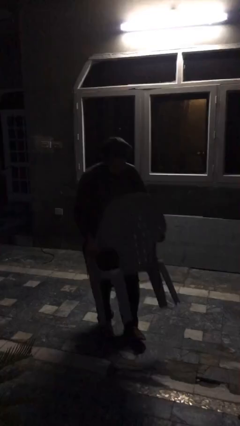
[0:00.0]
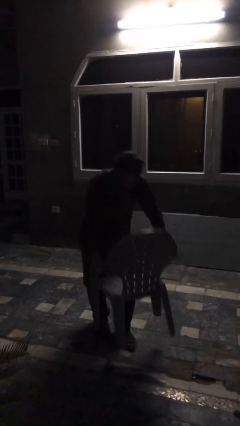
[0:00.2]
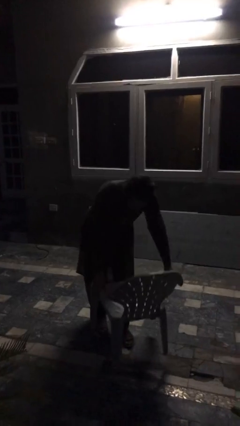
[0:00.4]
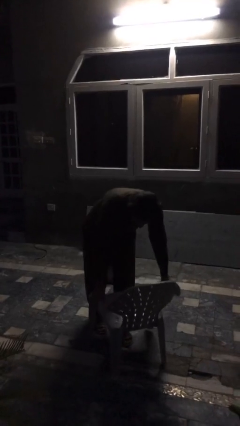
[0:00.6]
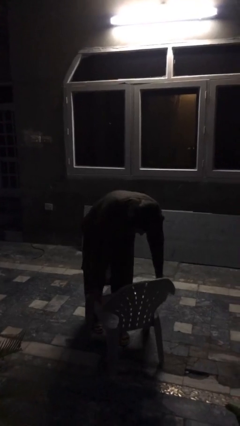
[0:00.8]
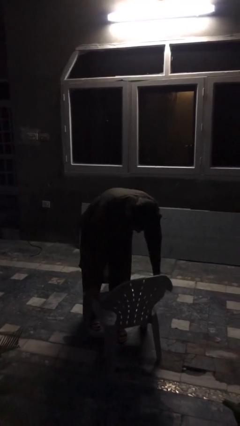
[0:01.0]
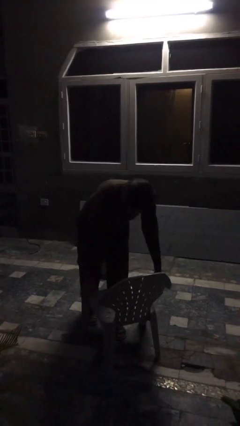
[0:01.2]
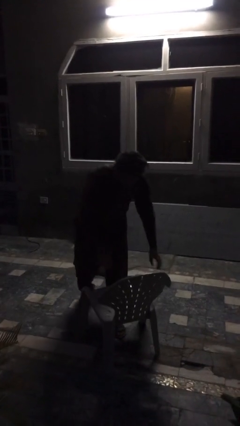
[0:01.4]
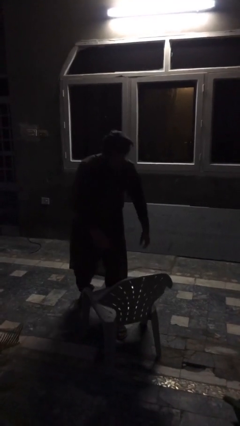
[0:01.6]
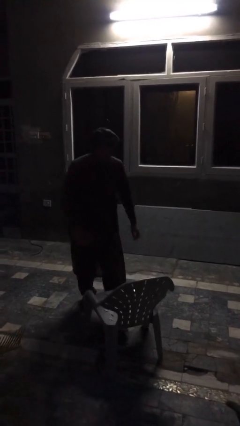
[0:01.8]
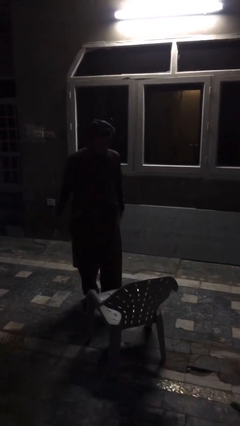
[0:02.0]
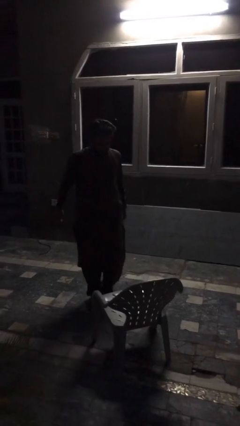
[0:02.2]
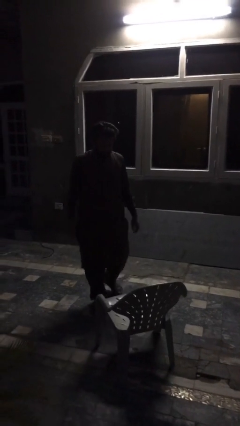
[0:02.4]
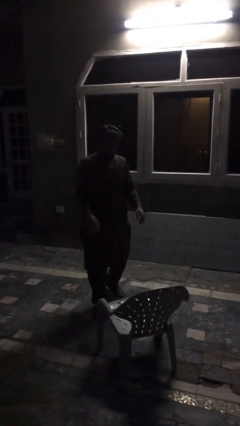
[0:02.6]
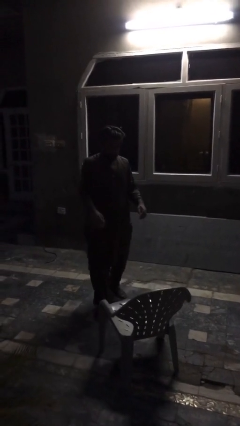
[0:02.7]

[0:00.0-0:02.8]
person puts down object on floor

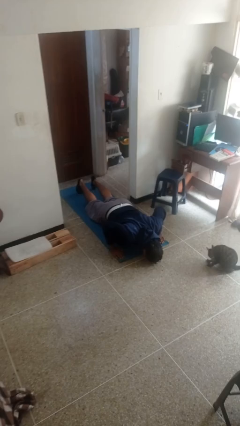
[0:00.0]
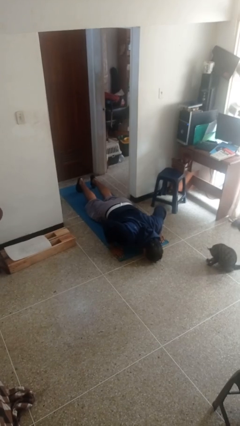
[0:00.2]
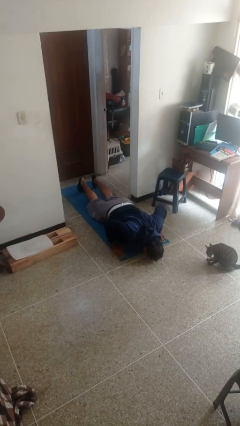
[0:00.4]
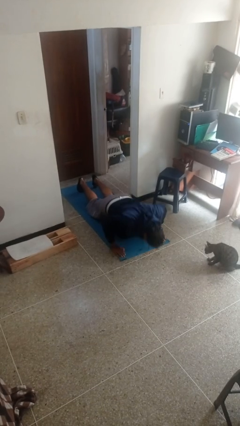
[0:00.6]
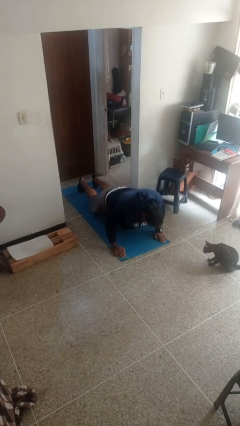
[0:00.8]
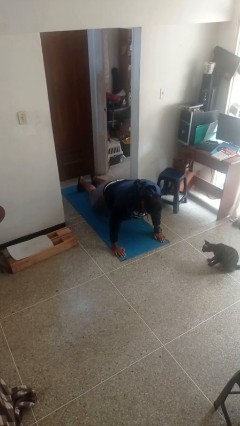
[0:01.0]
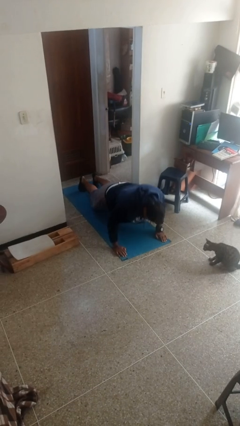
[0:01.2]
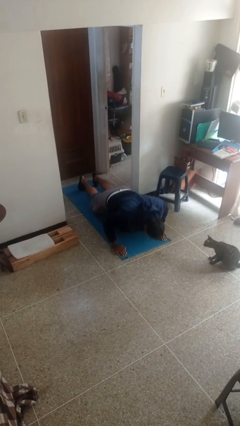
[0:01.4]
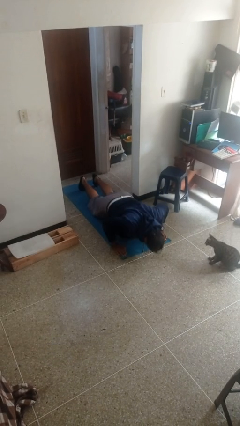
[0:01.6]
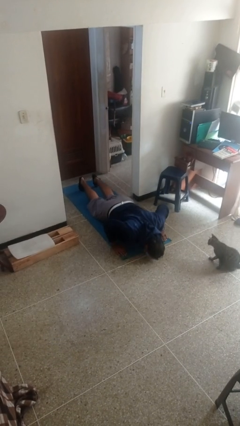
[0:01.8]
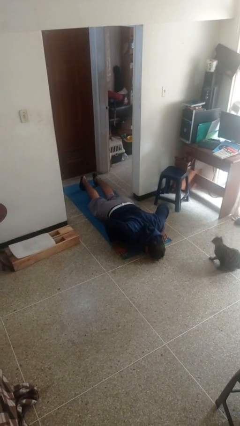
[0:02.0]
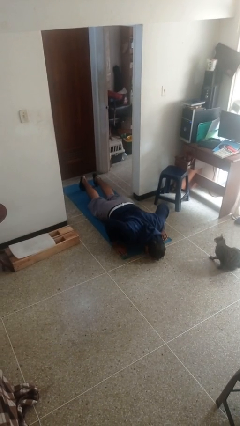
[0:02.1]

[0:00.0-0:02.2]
person exercises with pushup

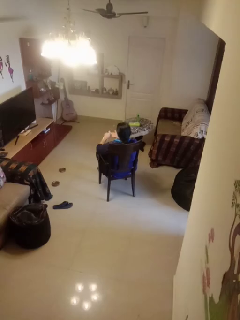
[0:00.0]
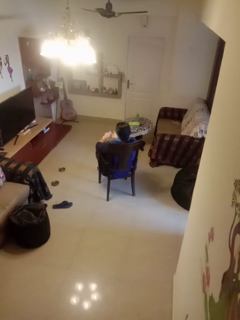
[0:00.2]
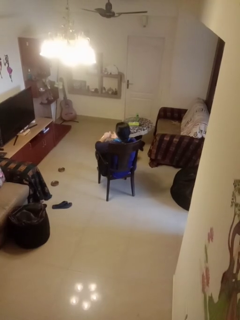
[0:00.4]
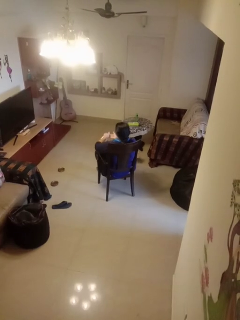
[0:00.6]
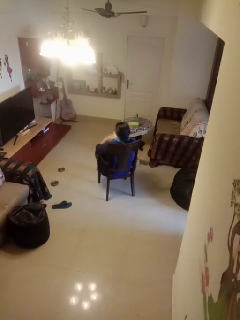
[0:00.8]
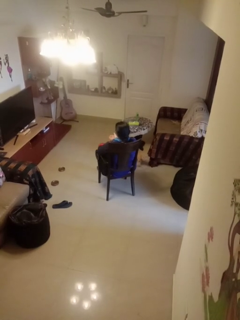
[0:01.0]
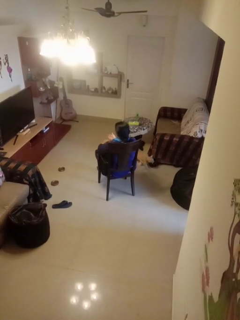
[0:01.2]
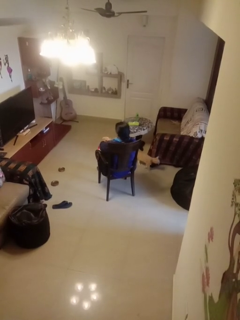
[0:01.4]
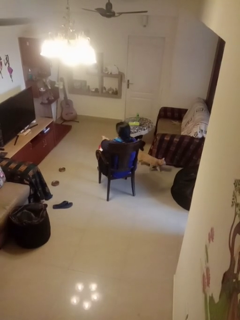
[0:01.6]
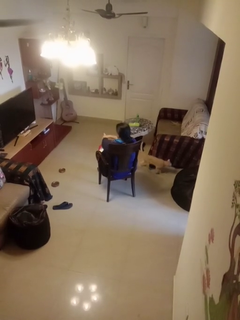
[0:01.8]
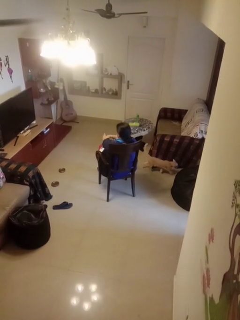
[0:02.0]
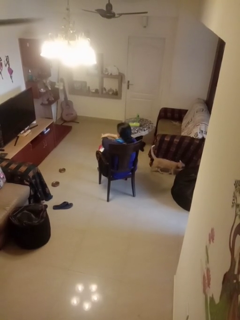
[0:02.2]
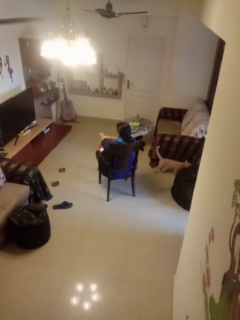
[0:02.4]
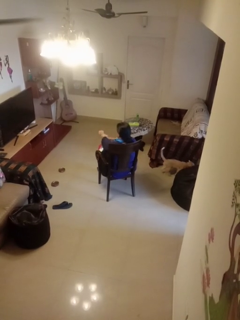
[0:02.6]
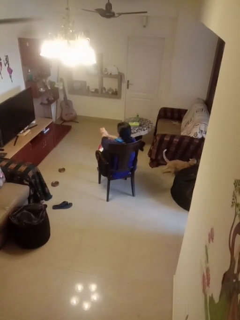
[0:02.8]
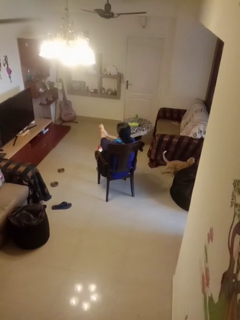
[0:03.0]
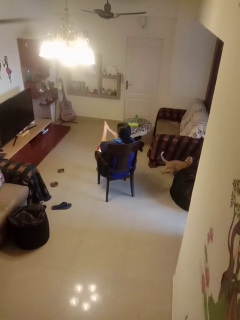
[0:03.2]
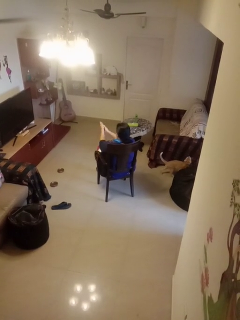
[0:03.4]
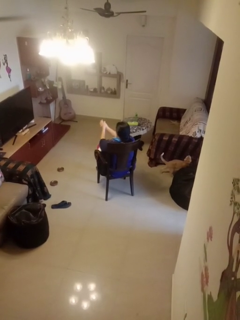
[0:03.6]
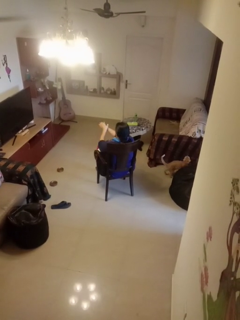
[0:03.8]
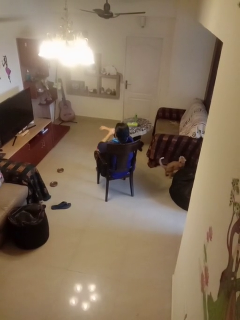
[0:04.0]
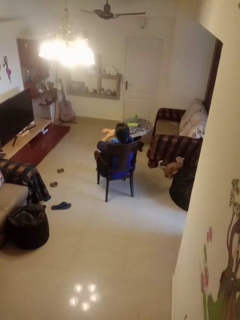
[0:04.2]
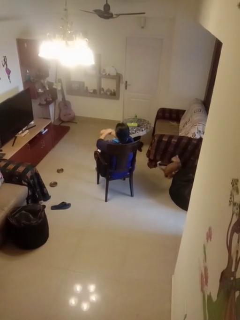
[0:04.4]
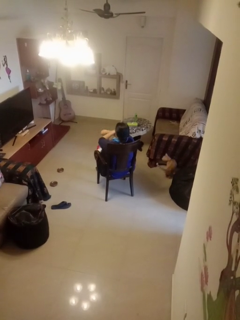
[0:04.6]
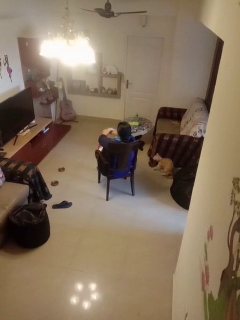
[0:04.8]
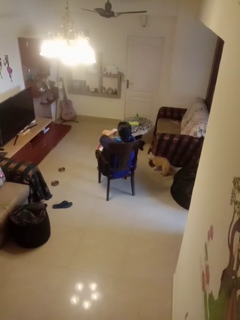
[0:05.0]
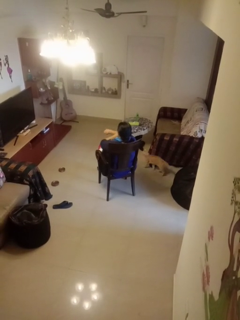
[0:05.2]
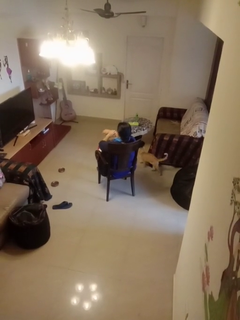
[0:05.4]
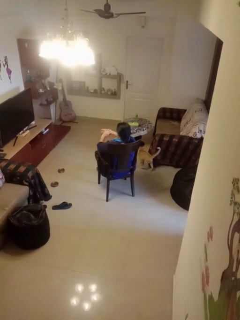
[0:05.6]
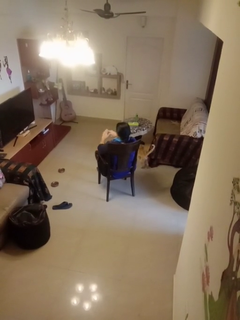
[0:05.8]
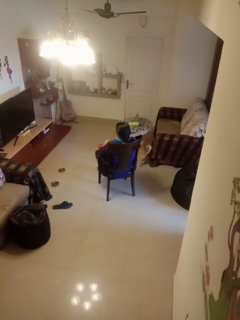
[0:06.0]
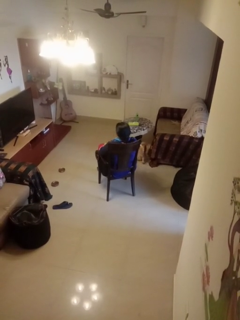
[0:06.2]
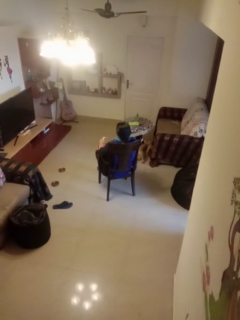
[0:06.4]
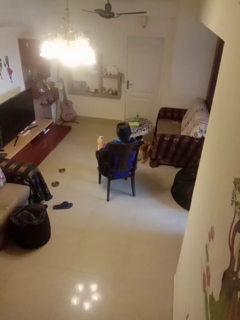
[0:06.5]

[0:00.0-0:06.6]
person applies sunscreen

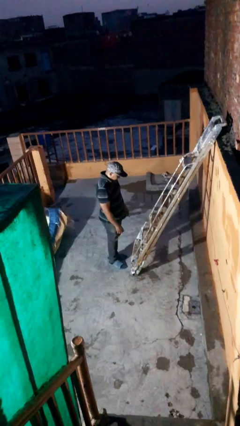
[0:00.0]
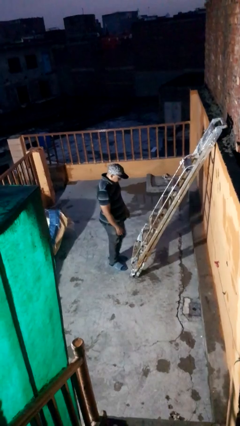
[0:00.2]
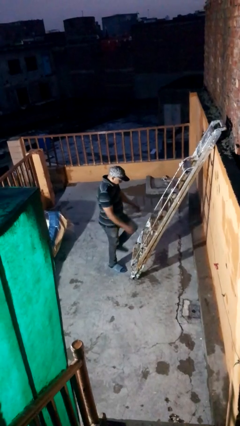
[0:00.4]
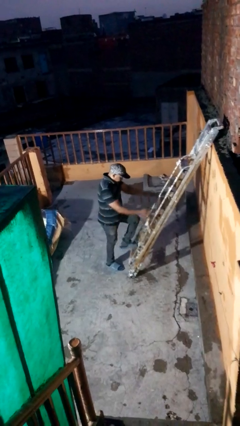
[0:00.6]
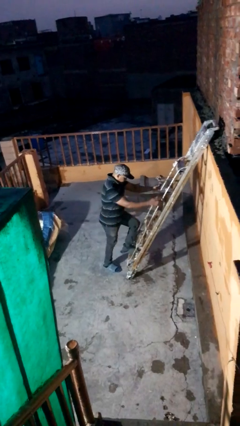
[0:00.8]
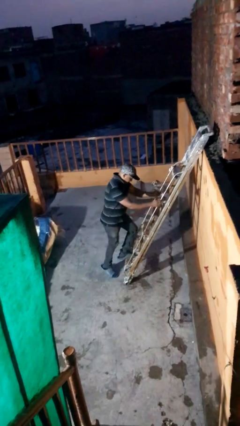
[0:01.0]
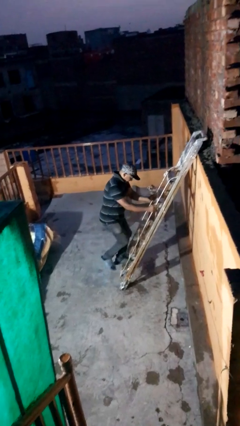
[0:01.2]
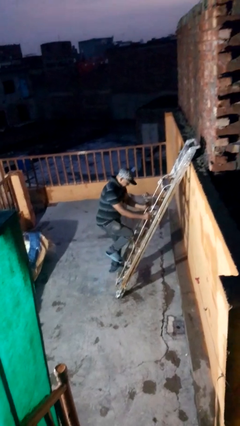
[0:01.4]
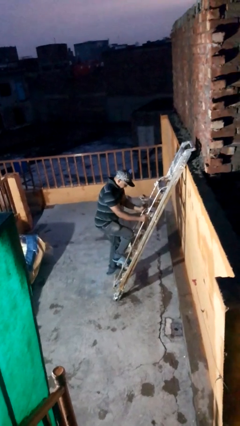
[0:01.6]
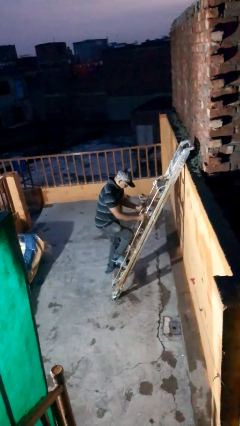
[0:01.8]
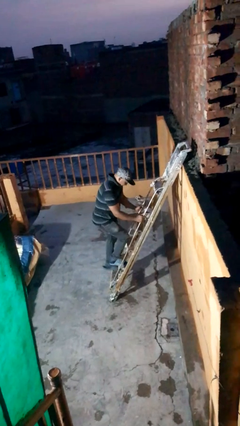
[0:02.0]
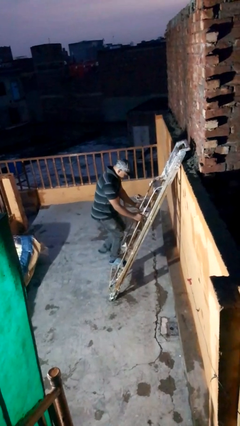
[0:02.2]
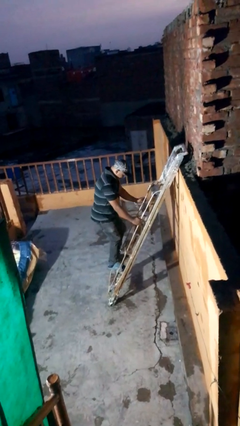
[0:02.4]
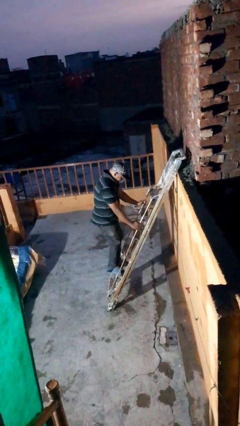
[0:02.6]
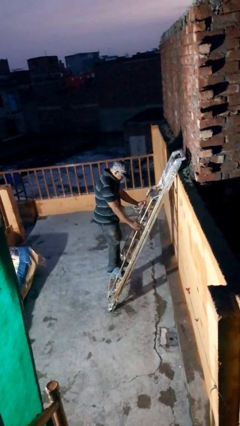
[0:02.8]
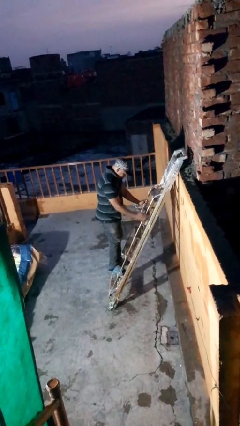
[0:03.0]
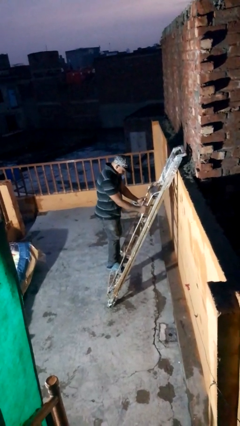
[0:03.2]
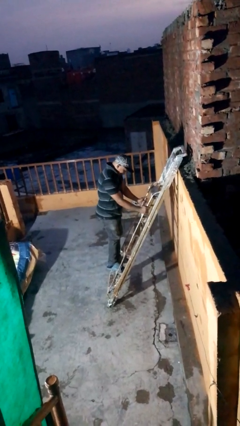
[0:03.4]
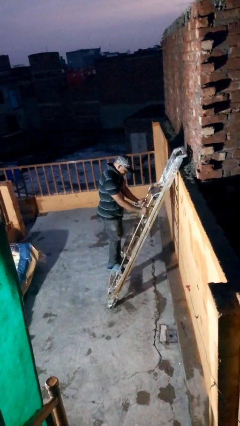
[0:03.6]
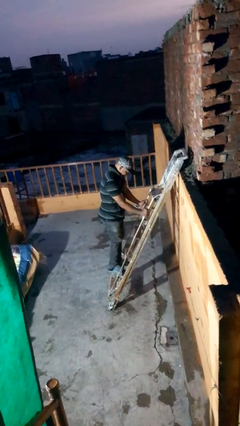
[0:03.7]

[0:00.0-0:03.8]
person climbs up ladder

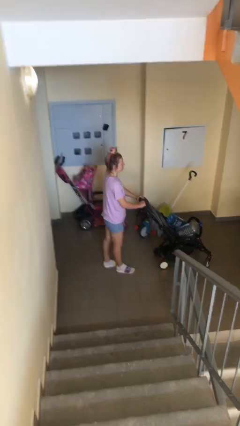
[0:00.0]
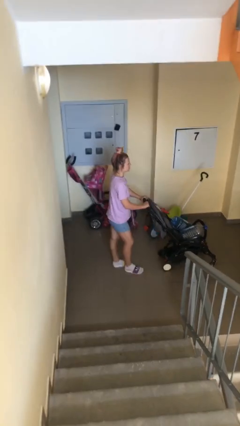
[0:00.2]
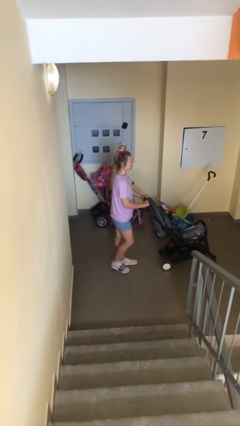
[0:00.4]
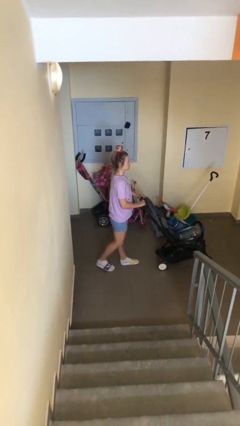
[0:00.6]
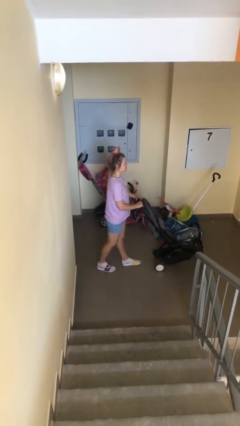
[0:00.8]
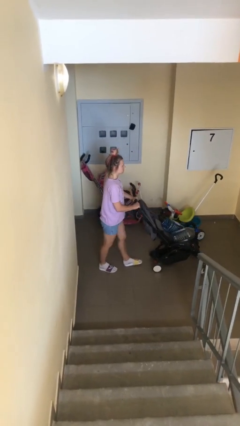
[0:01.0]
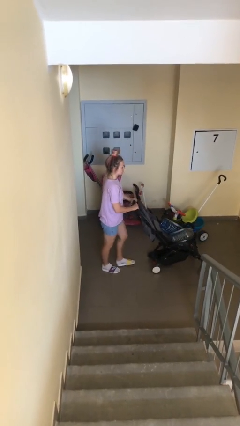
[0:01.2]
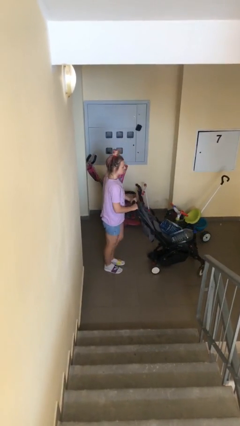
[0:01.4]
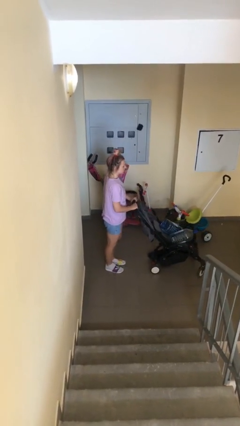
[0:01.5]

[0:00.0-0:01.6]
person pulls wheeled cart

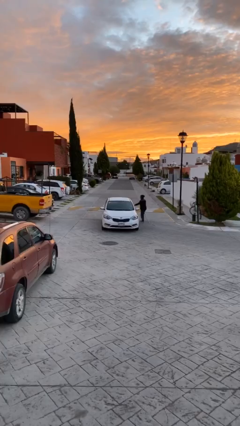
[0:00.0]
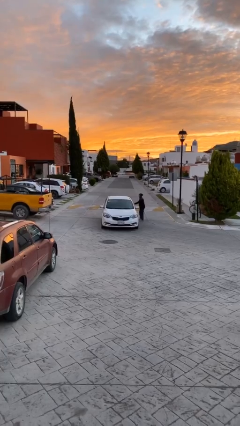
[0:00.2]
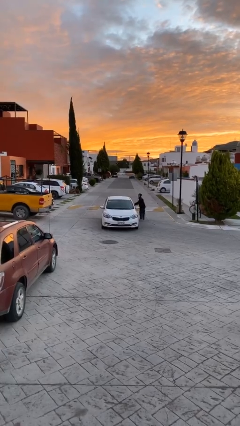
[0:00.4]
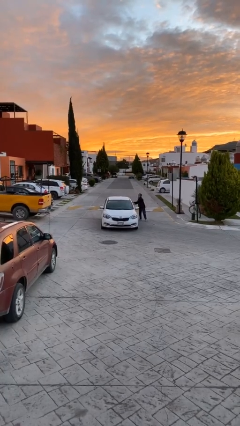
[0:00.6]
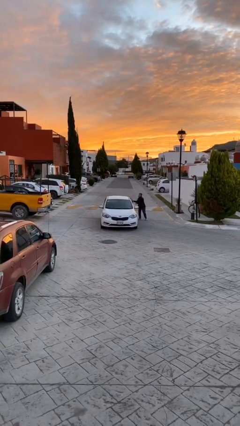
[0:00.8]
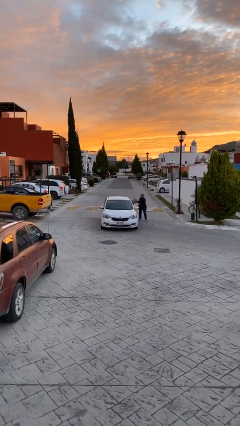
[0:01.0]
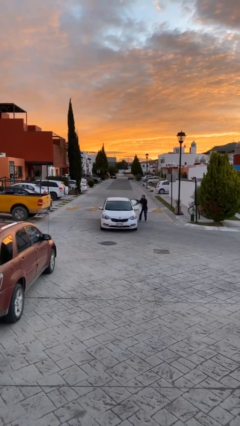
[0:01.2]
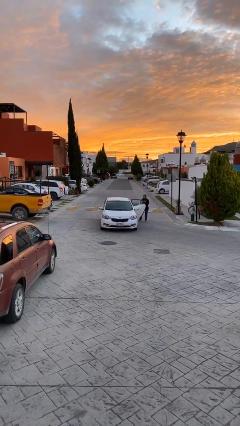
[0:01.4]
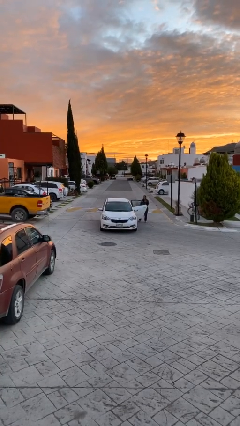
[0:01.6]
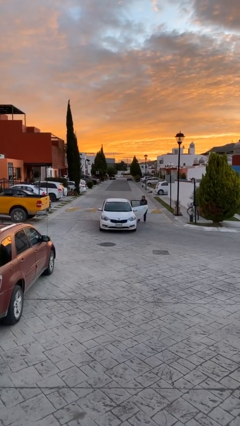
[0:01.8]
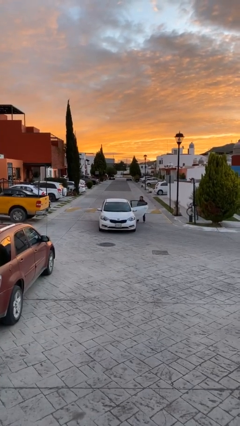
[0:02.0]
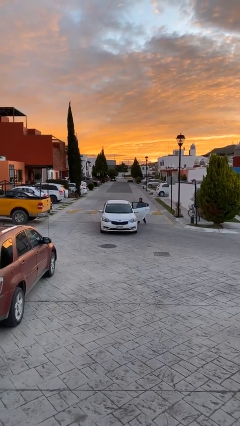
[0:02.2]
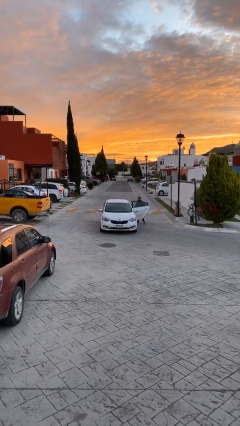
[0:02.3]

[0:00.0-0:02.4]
car picks up person
